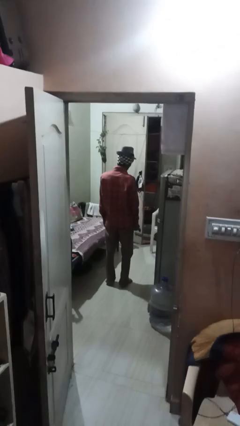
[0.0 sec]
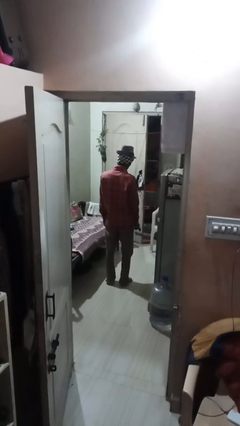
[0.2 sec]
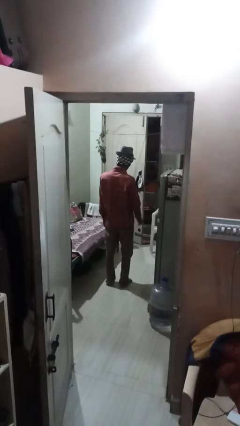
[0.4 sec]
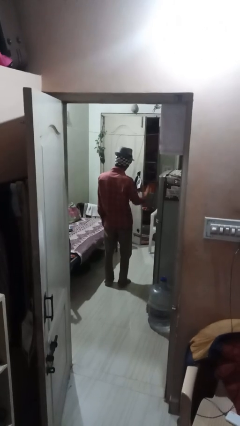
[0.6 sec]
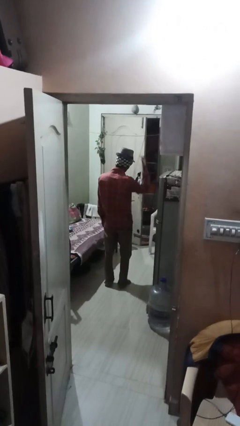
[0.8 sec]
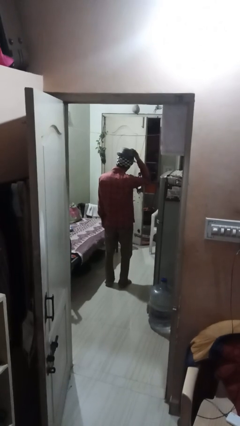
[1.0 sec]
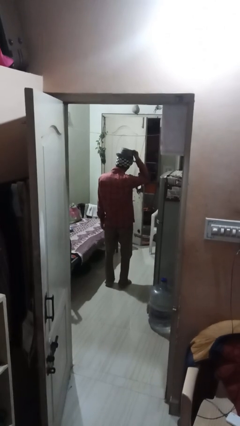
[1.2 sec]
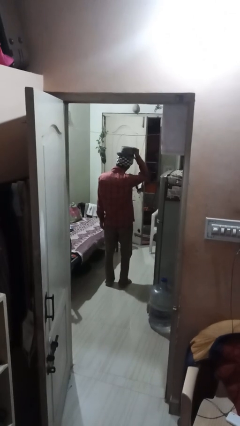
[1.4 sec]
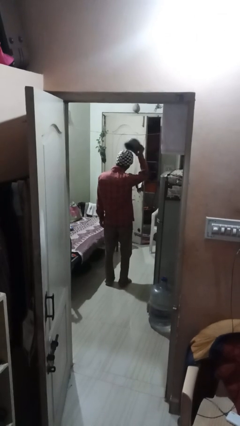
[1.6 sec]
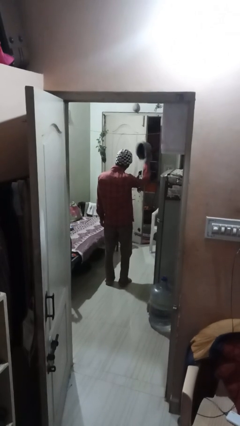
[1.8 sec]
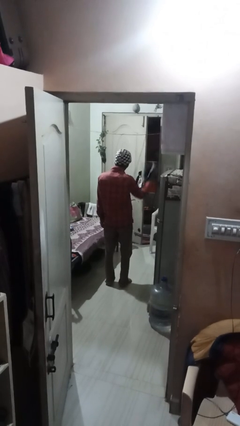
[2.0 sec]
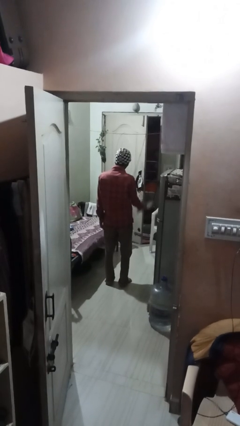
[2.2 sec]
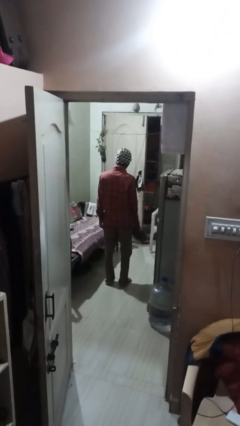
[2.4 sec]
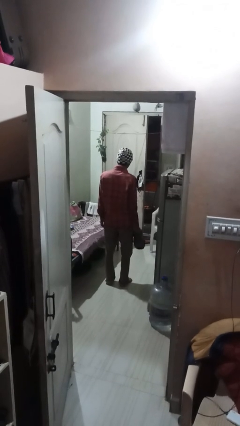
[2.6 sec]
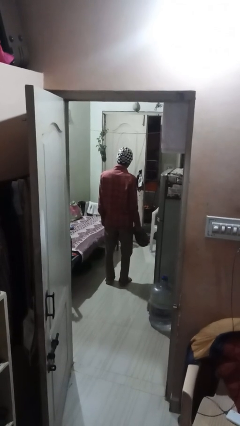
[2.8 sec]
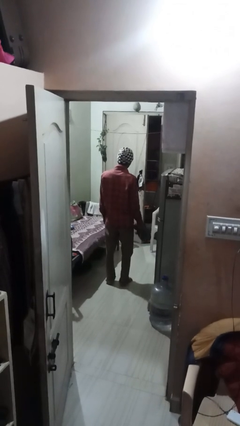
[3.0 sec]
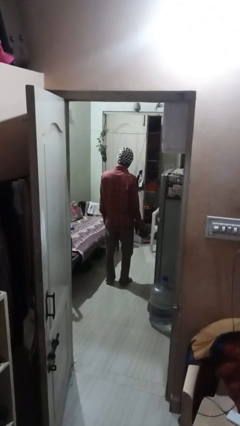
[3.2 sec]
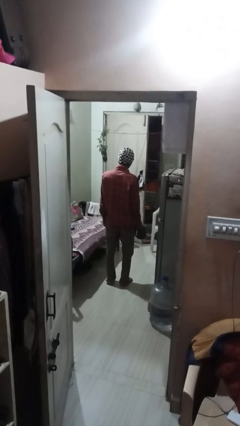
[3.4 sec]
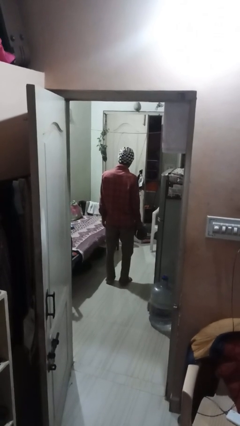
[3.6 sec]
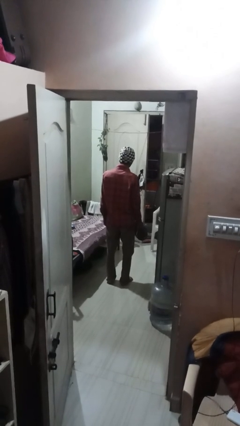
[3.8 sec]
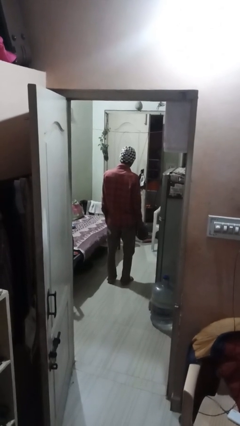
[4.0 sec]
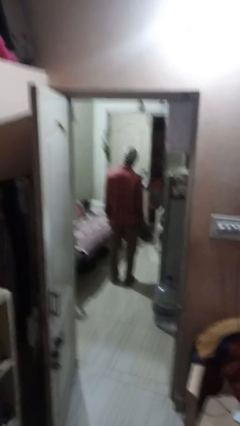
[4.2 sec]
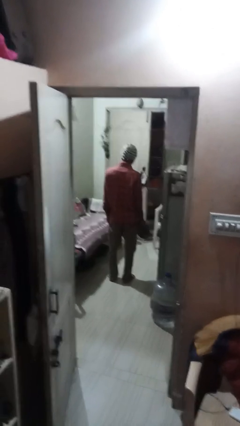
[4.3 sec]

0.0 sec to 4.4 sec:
person takes off hat

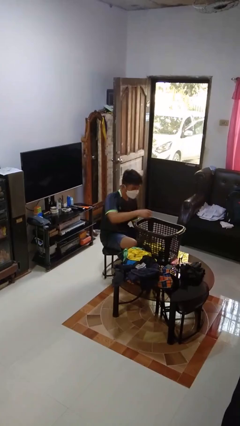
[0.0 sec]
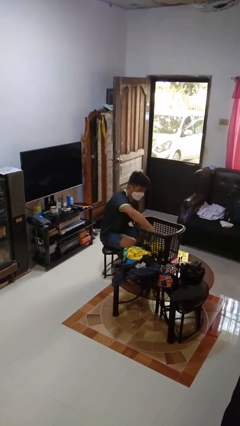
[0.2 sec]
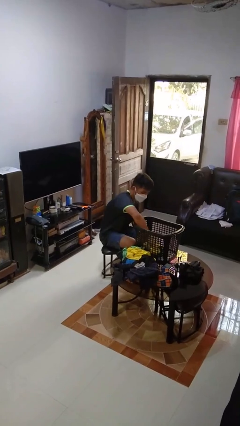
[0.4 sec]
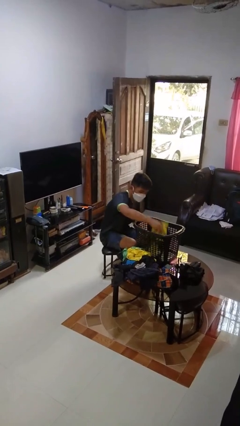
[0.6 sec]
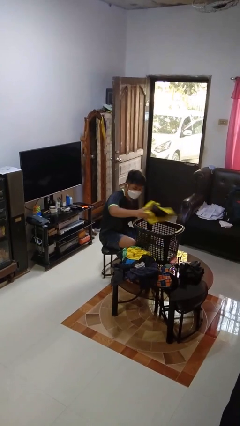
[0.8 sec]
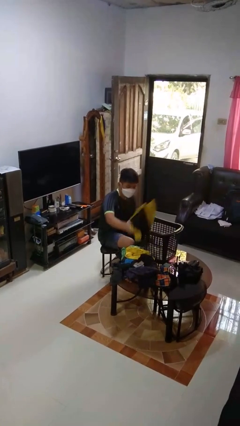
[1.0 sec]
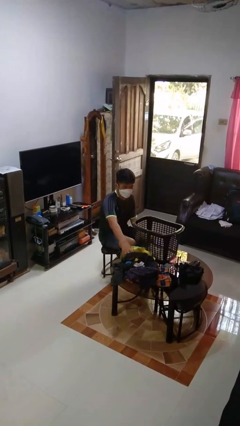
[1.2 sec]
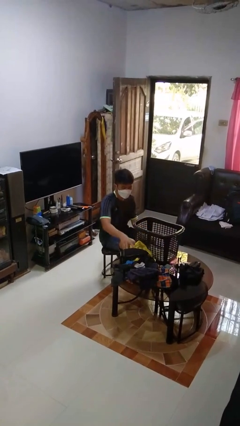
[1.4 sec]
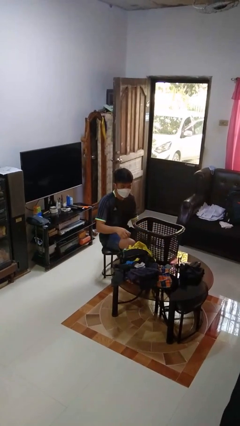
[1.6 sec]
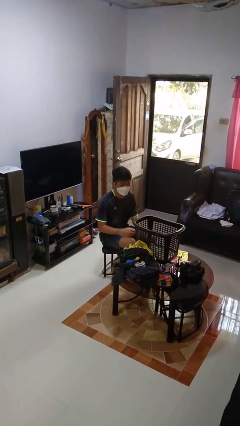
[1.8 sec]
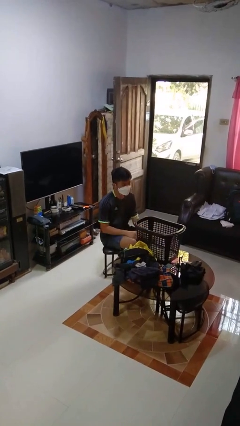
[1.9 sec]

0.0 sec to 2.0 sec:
person takes object from basket

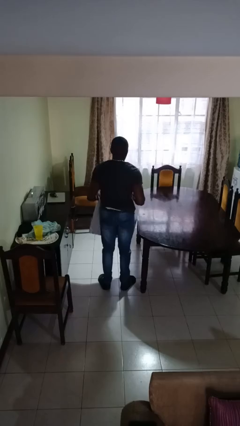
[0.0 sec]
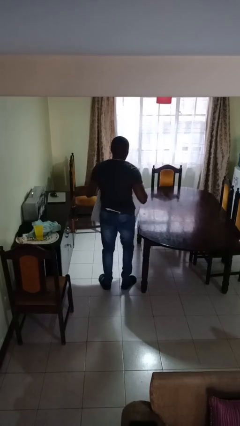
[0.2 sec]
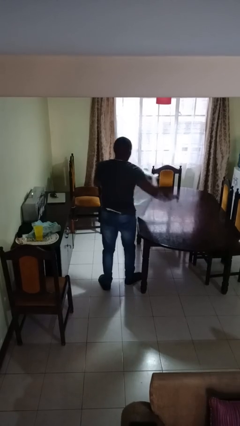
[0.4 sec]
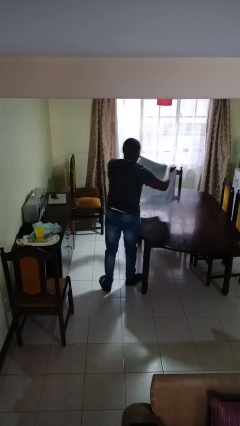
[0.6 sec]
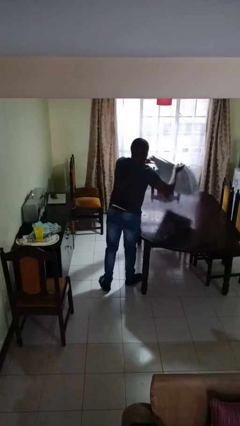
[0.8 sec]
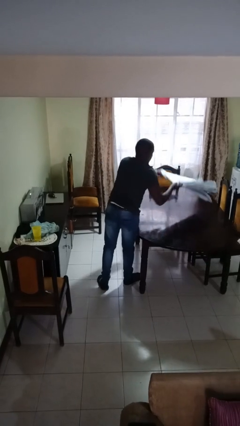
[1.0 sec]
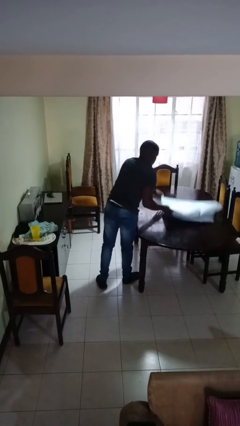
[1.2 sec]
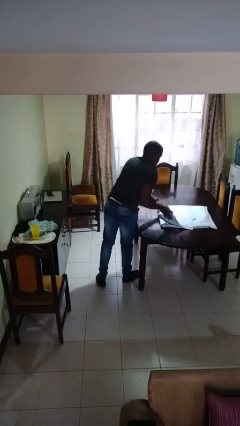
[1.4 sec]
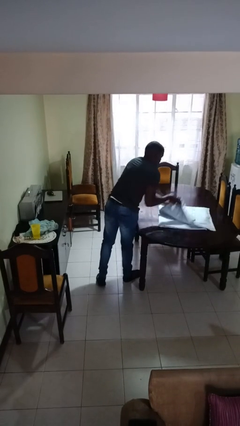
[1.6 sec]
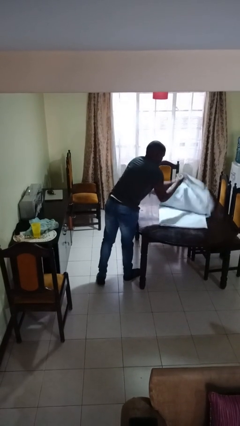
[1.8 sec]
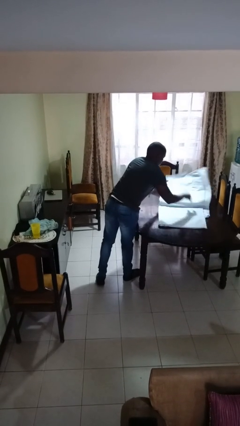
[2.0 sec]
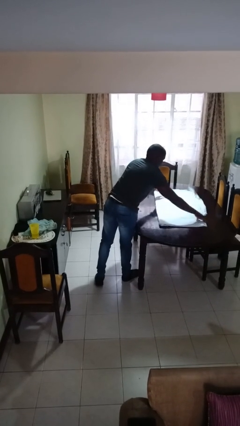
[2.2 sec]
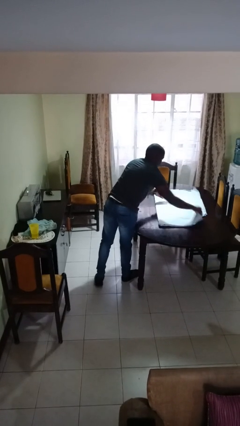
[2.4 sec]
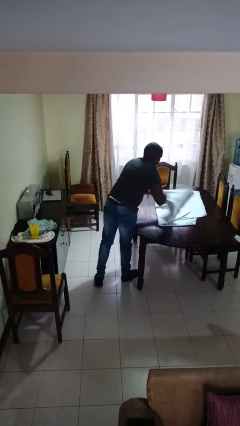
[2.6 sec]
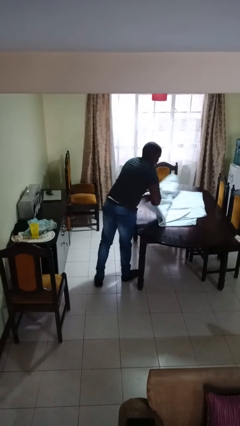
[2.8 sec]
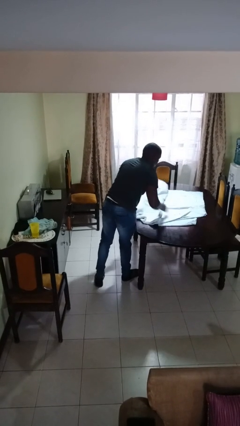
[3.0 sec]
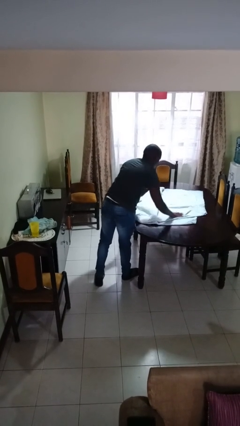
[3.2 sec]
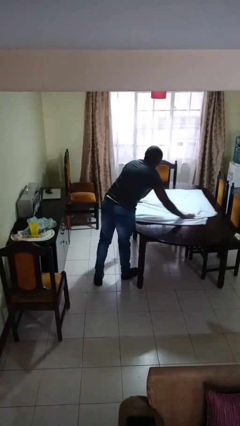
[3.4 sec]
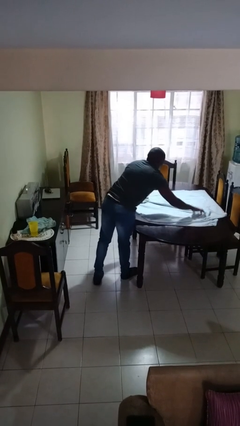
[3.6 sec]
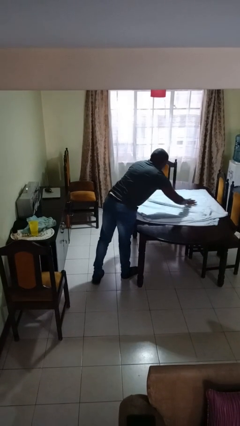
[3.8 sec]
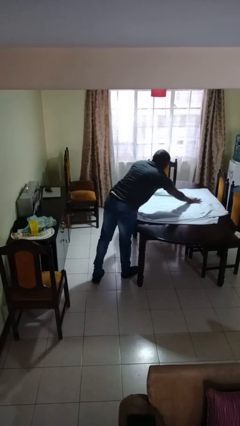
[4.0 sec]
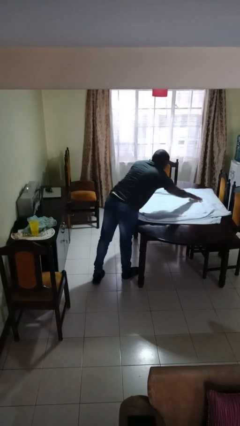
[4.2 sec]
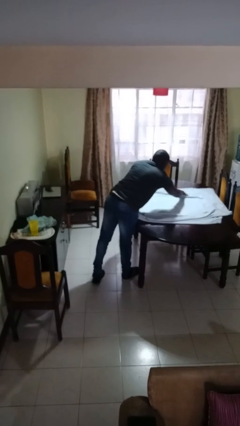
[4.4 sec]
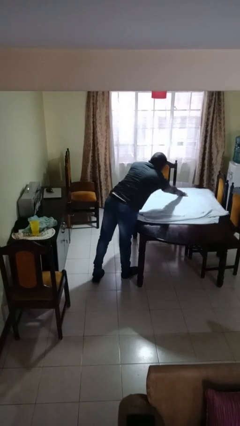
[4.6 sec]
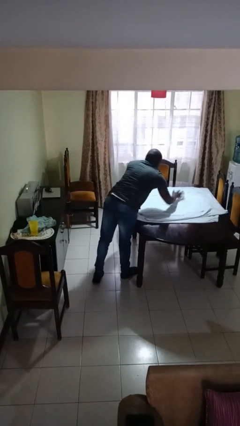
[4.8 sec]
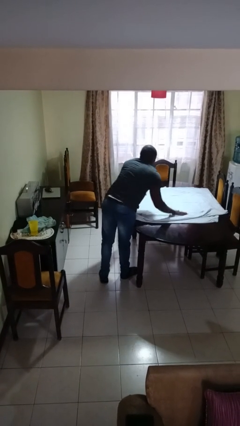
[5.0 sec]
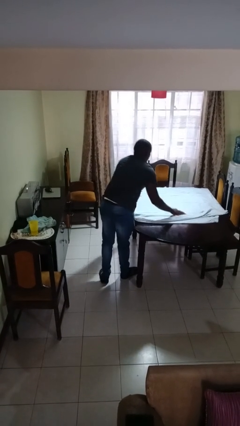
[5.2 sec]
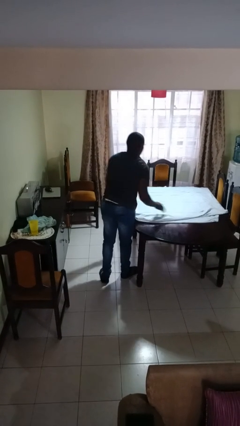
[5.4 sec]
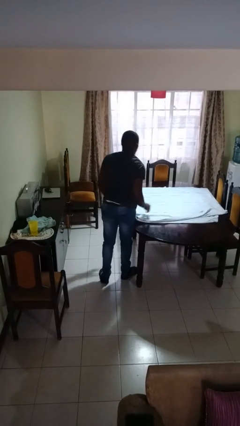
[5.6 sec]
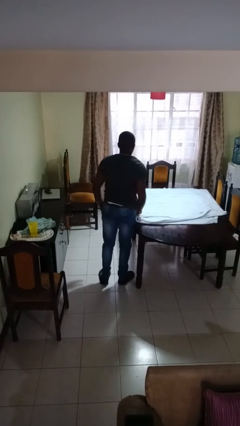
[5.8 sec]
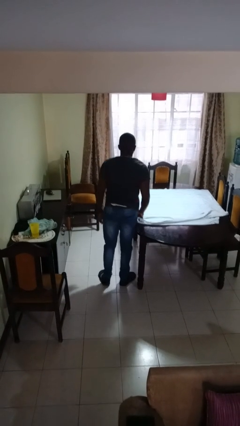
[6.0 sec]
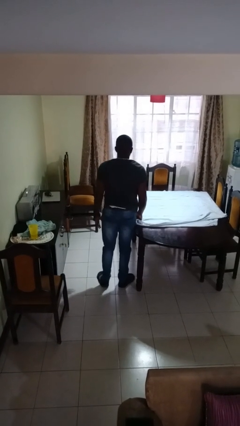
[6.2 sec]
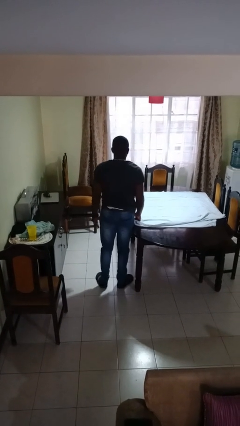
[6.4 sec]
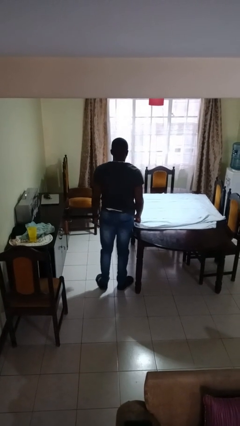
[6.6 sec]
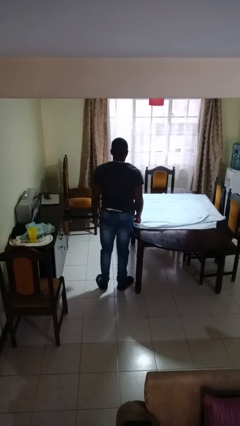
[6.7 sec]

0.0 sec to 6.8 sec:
person spreads tablecloth

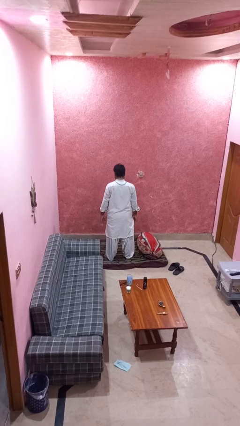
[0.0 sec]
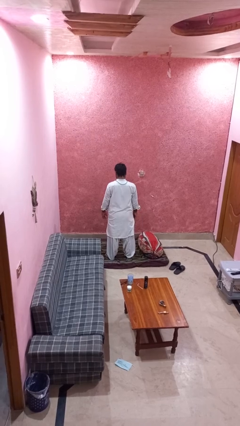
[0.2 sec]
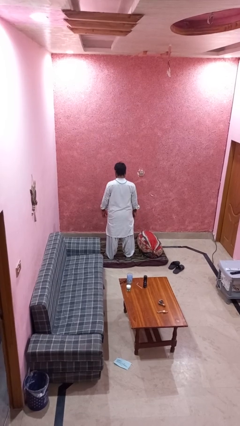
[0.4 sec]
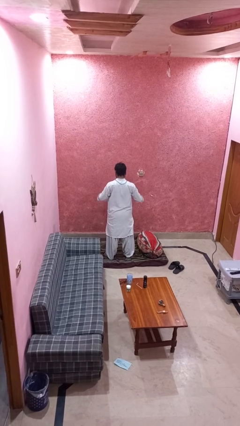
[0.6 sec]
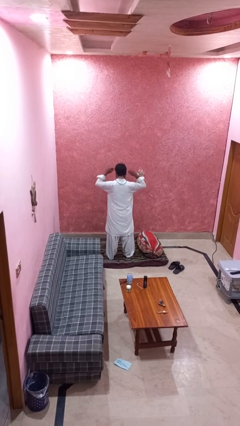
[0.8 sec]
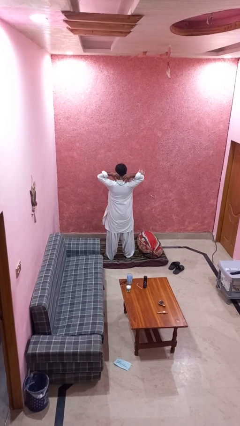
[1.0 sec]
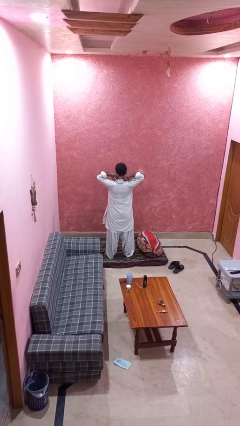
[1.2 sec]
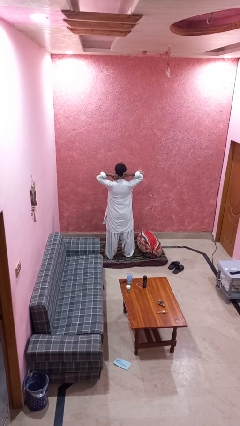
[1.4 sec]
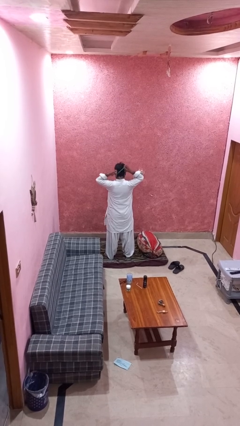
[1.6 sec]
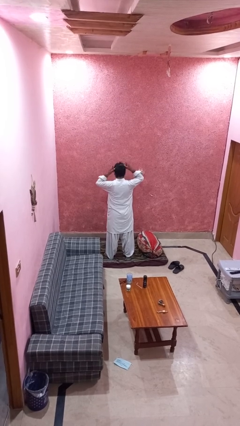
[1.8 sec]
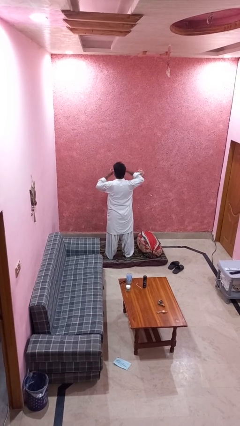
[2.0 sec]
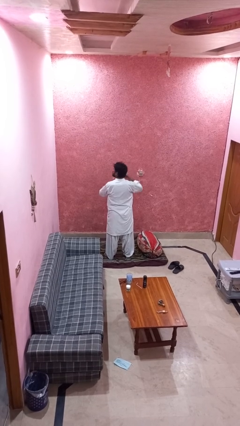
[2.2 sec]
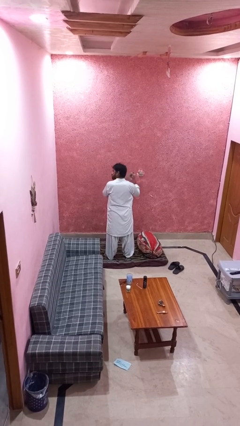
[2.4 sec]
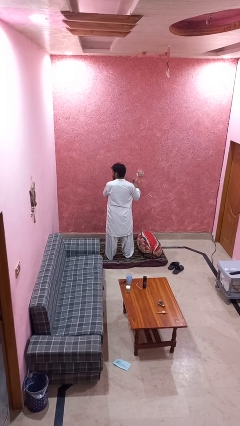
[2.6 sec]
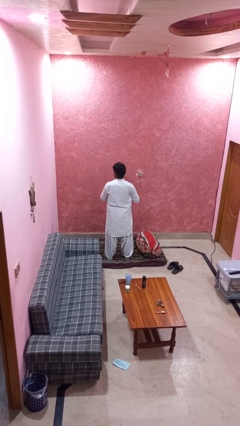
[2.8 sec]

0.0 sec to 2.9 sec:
person takes off necklace

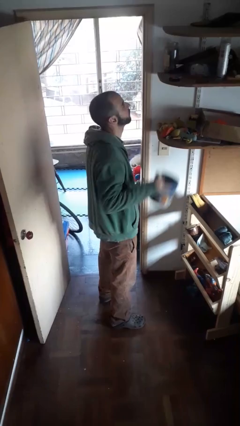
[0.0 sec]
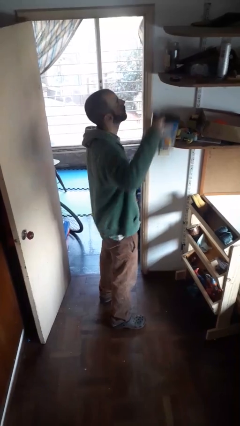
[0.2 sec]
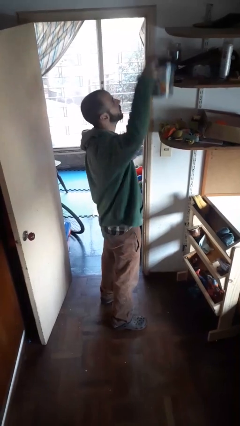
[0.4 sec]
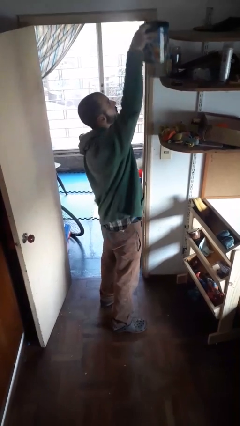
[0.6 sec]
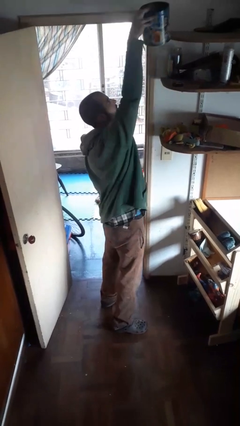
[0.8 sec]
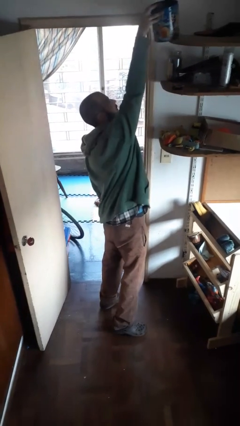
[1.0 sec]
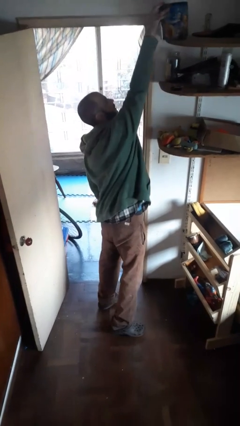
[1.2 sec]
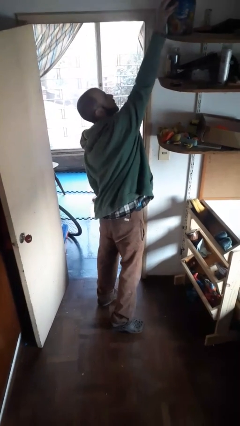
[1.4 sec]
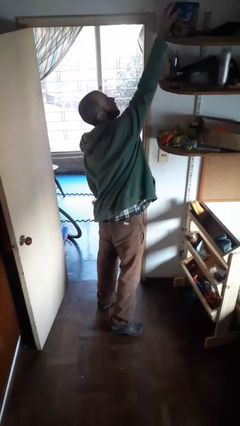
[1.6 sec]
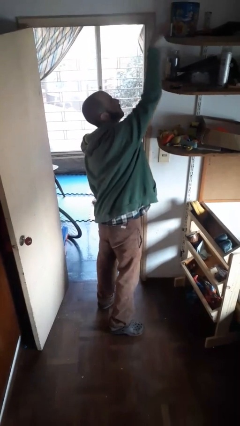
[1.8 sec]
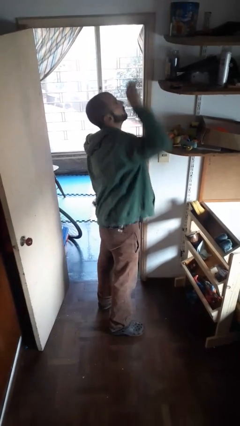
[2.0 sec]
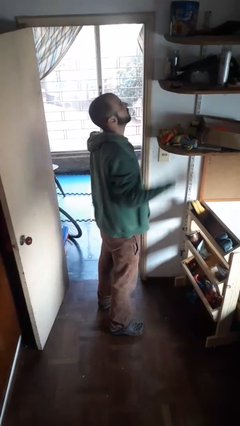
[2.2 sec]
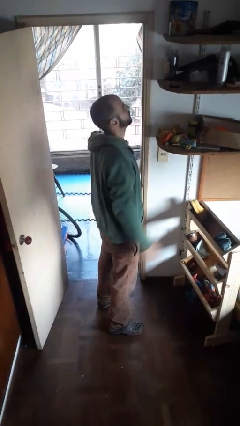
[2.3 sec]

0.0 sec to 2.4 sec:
person puts down object on shelf
